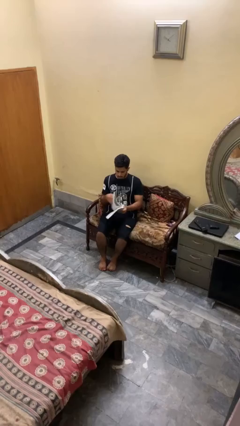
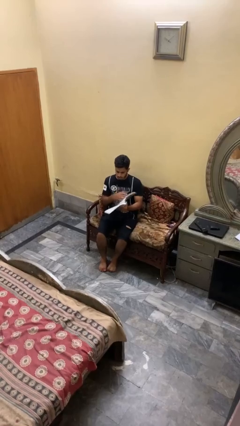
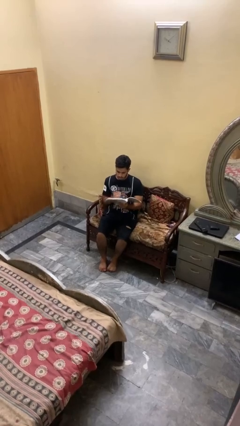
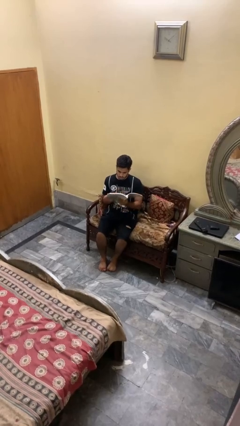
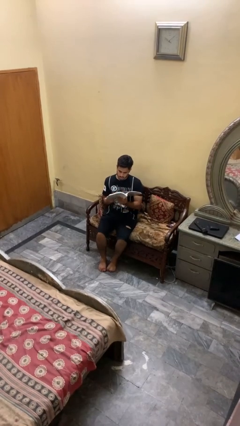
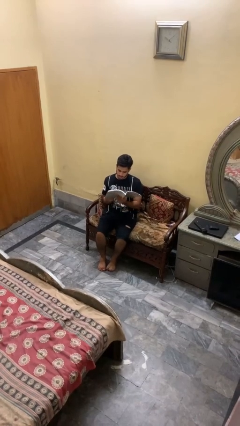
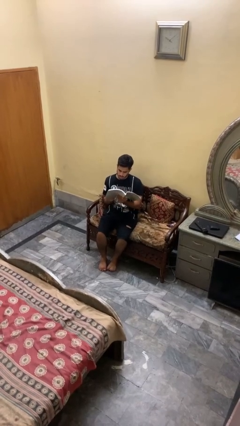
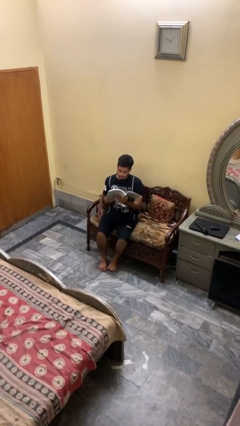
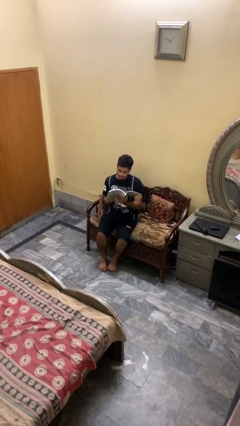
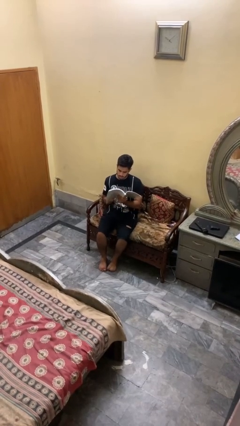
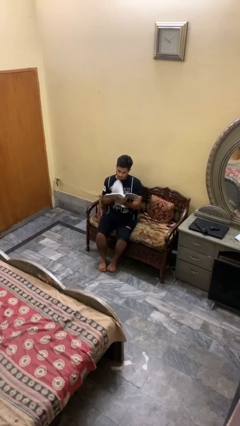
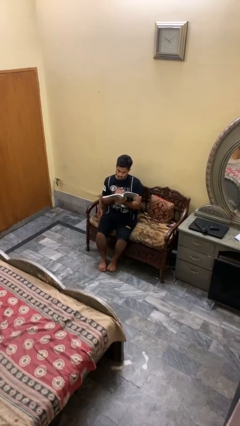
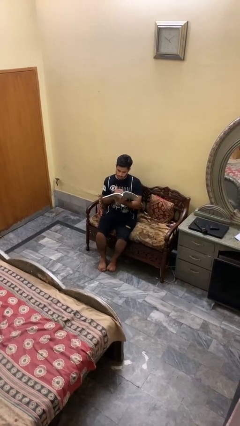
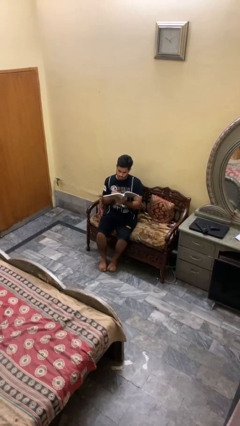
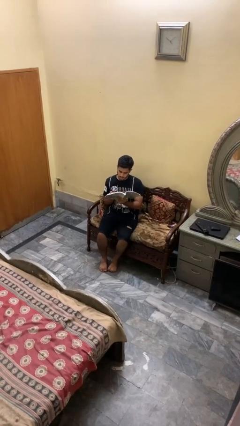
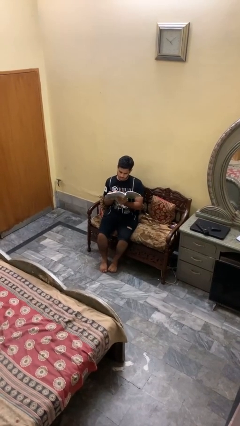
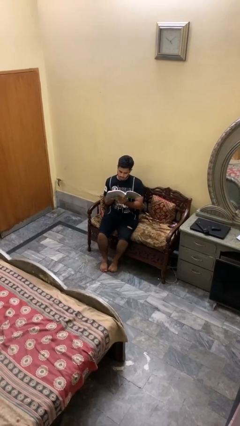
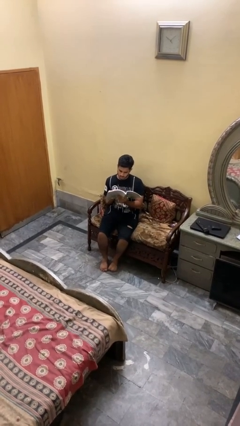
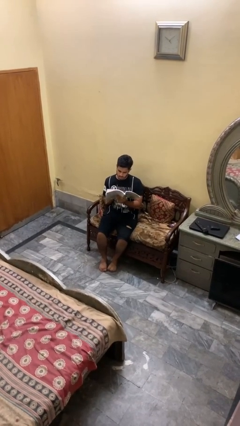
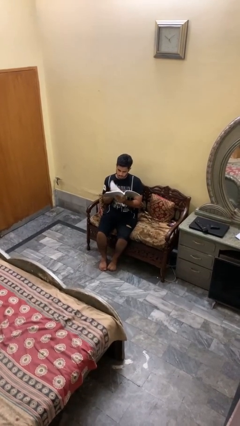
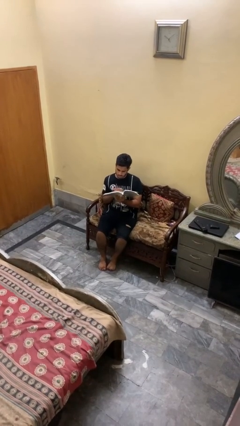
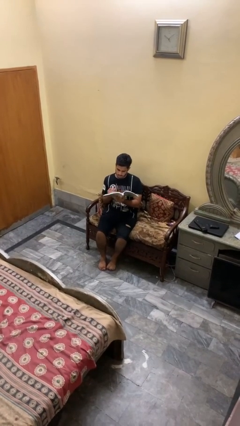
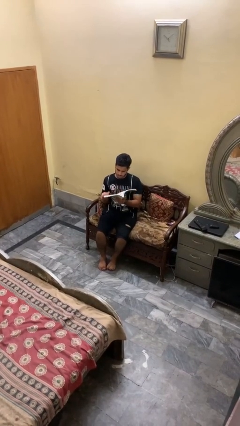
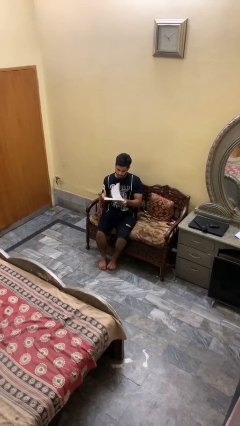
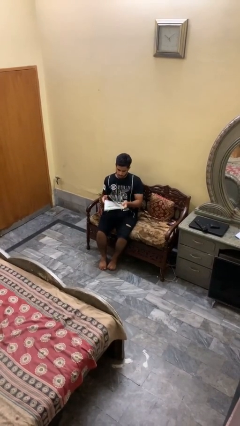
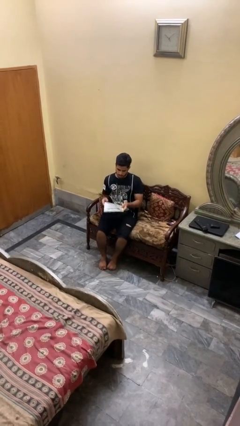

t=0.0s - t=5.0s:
person reads book

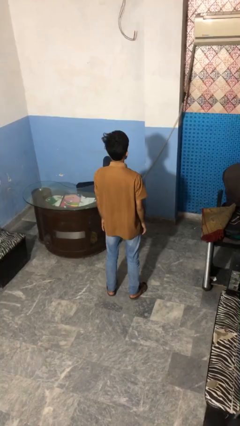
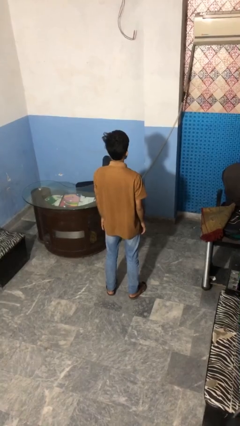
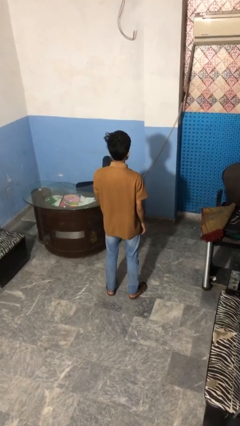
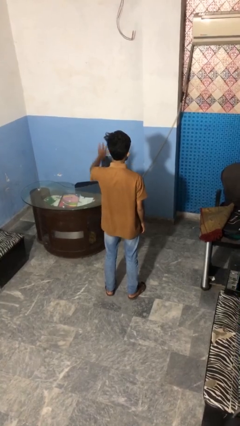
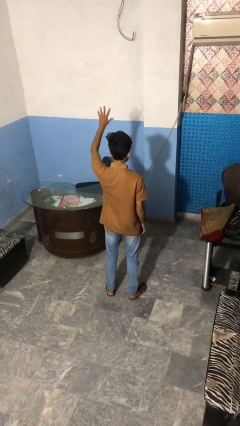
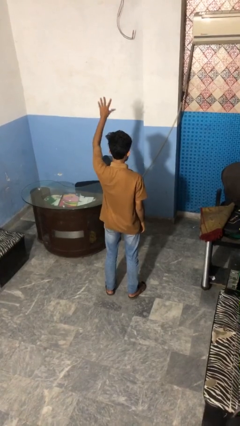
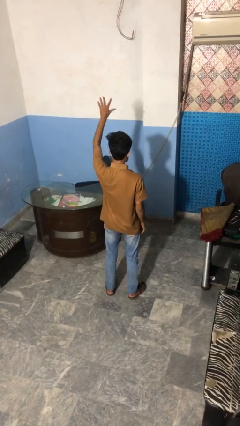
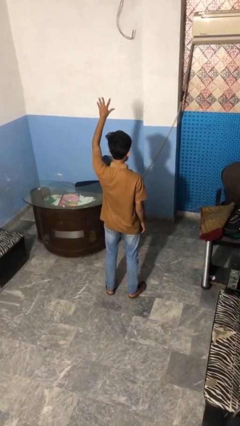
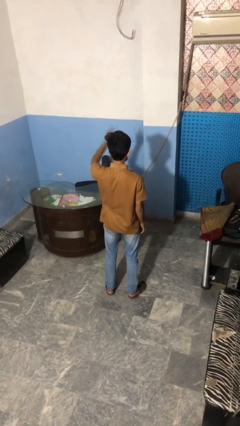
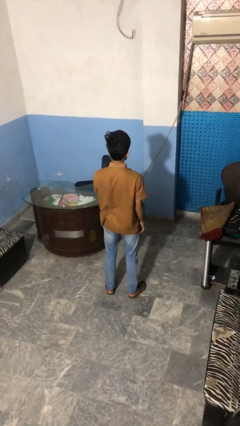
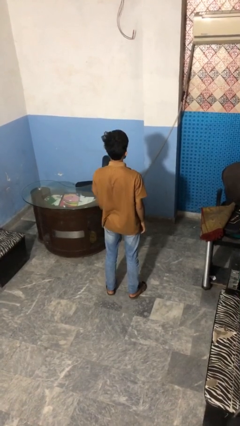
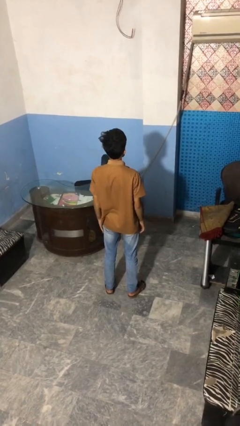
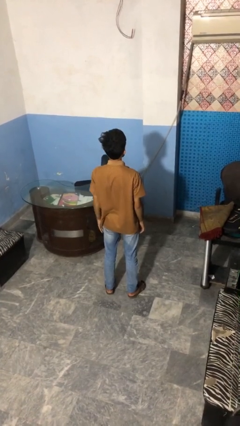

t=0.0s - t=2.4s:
person gestures number five

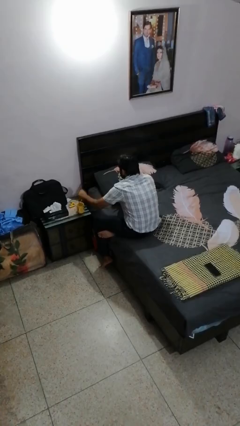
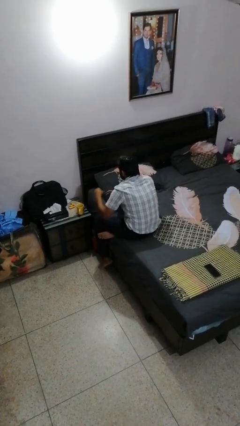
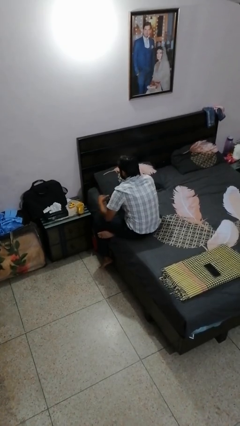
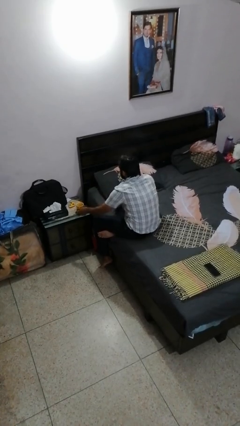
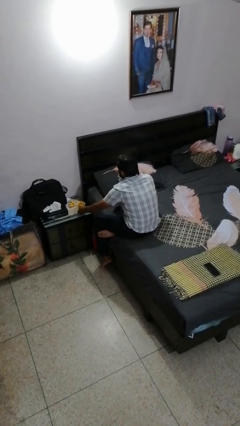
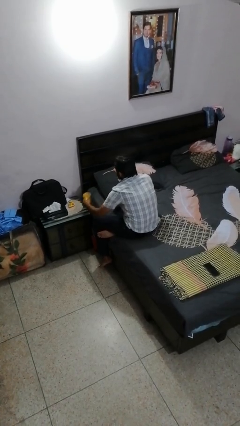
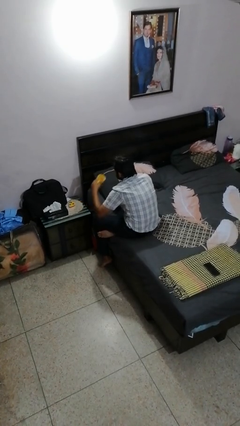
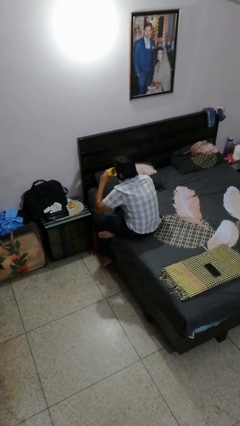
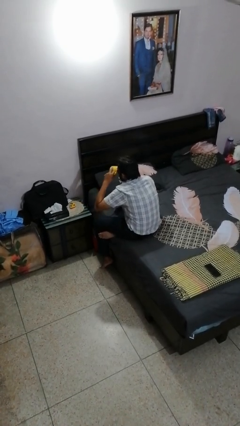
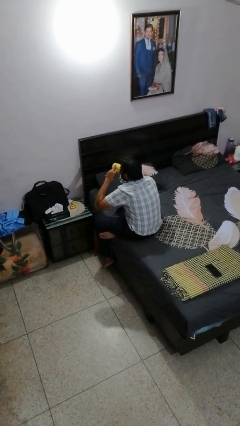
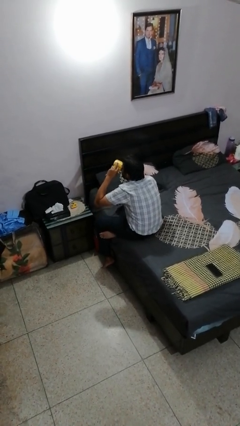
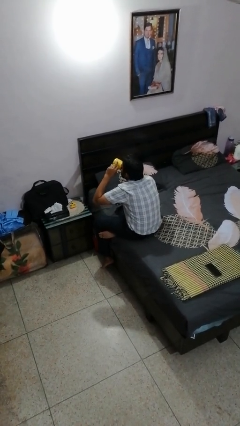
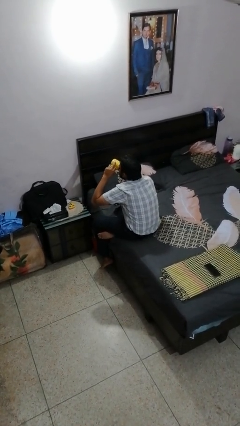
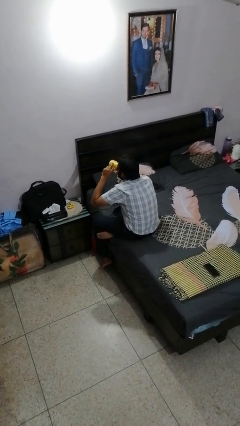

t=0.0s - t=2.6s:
person drinks from mug

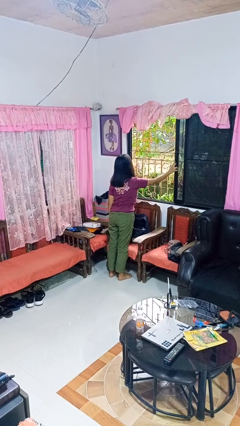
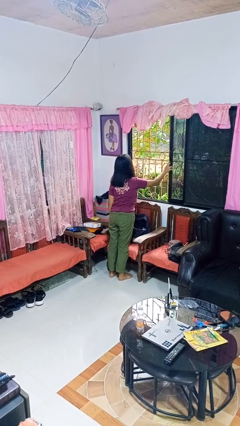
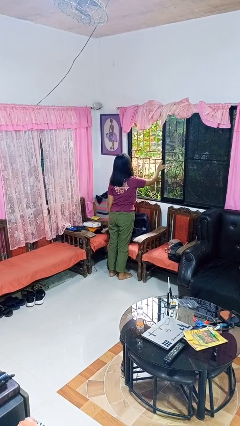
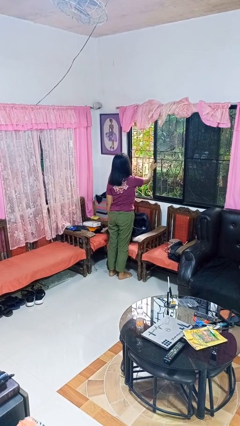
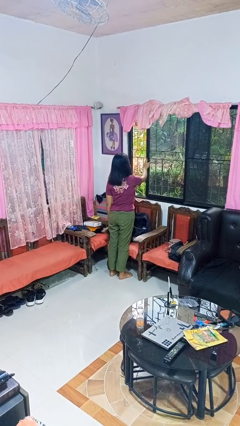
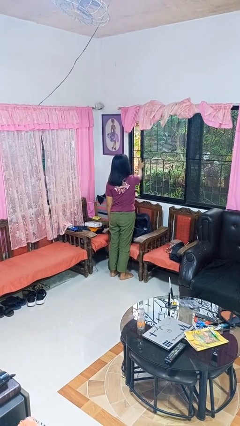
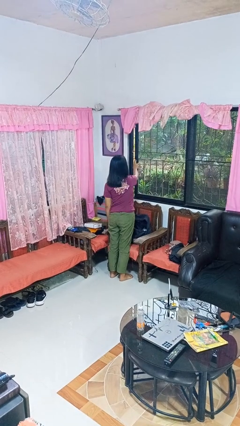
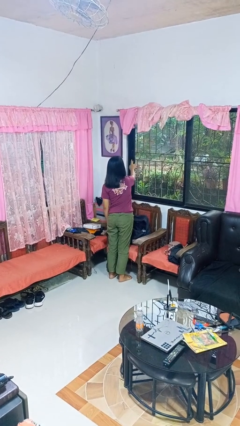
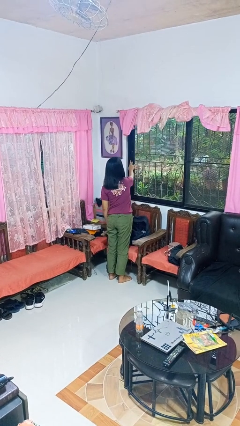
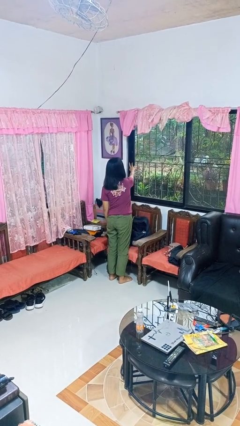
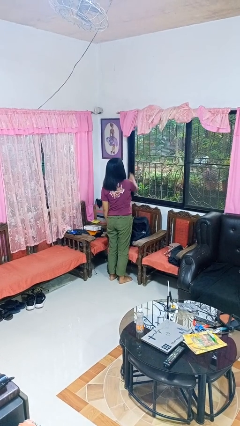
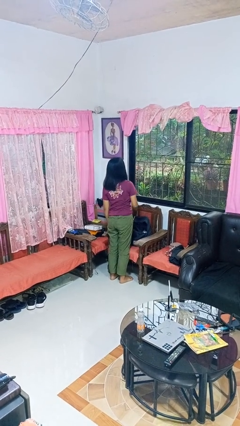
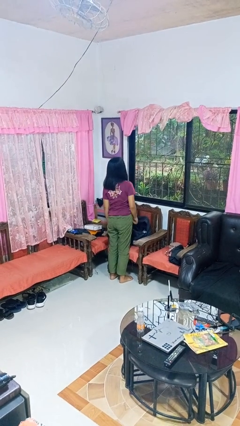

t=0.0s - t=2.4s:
person closes home window

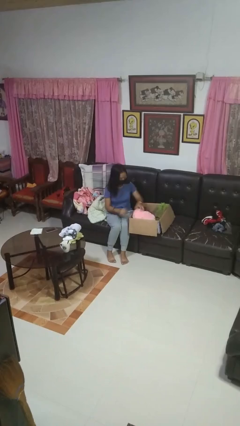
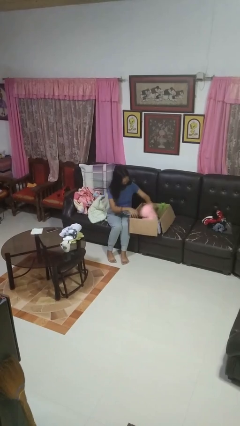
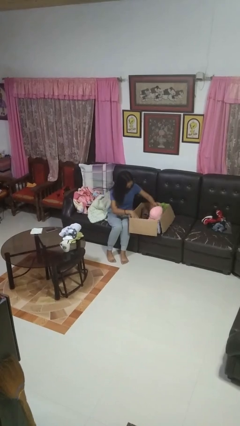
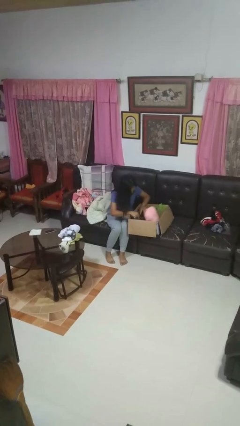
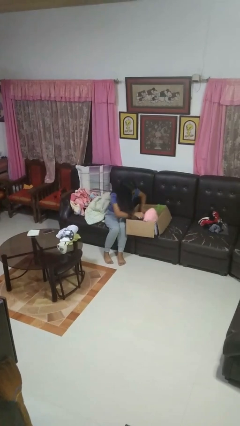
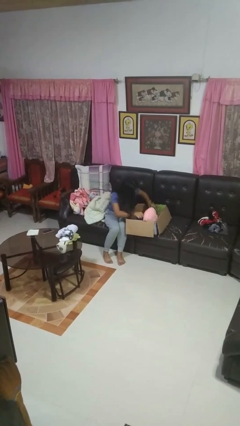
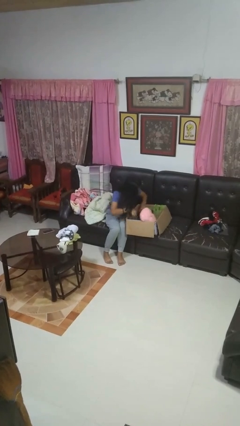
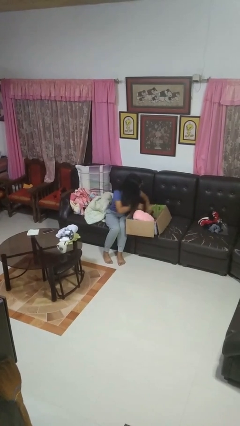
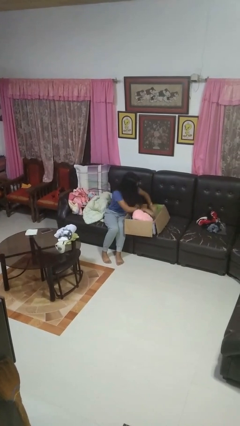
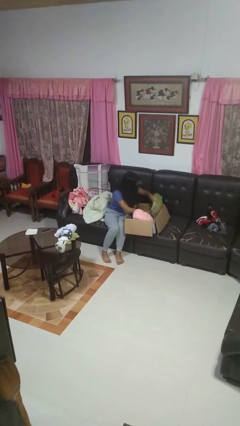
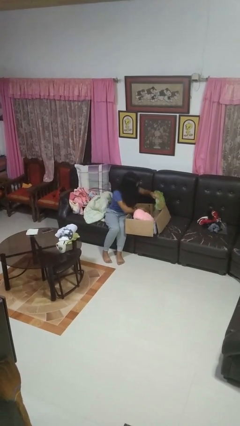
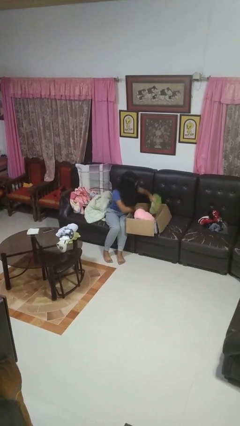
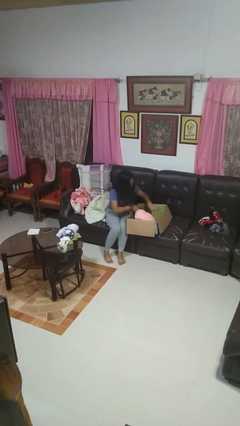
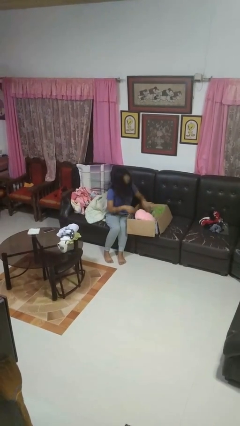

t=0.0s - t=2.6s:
person searches in box

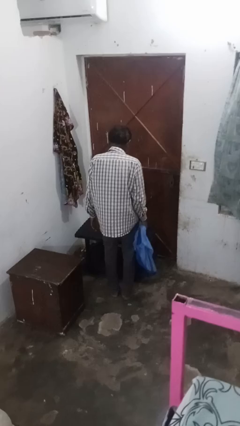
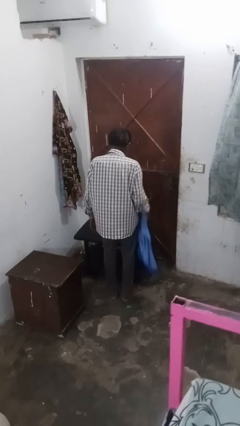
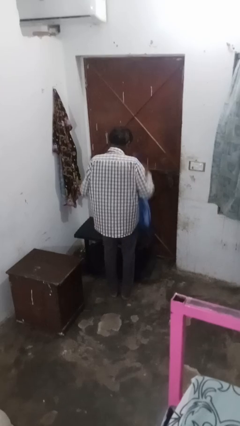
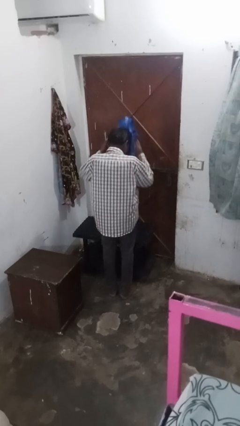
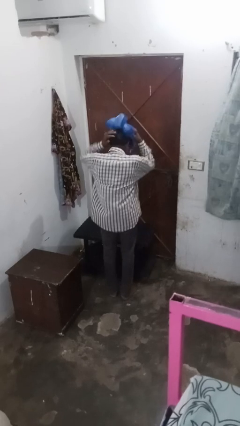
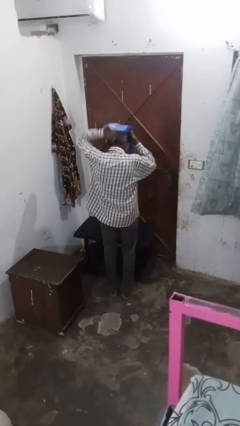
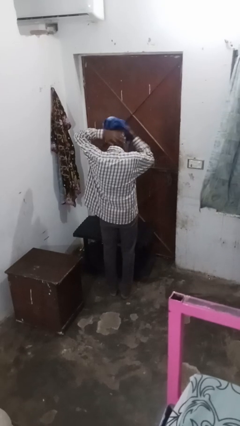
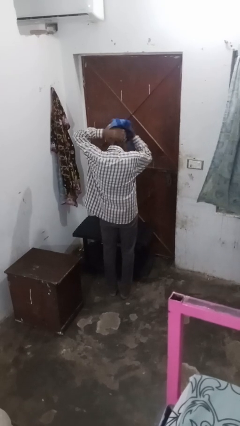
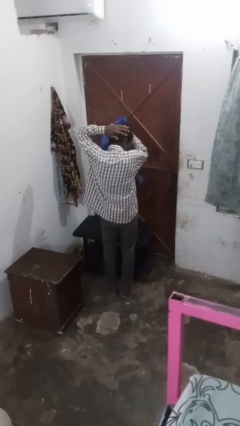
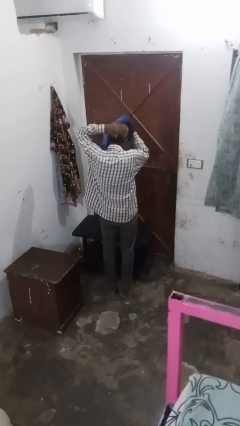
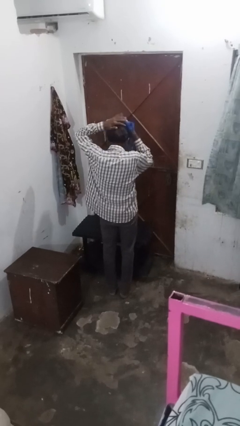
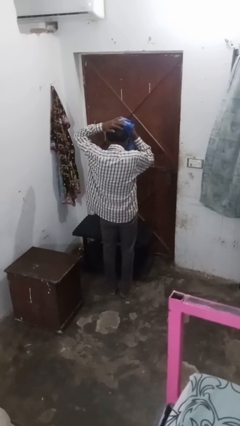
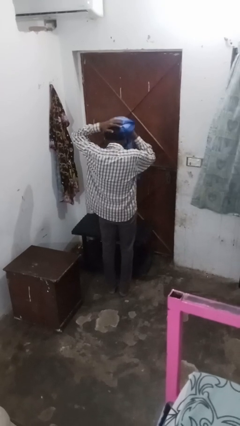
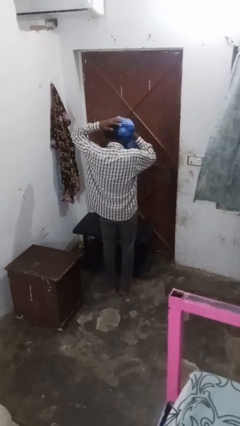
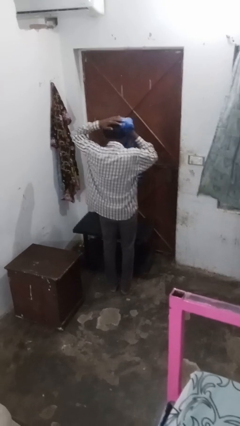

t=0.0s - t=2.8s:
person dries hair with towel
